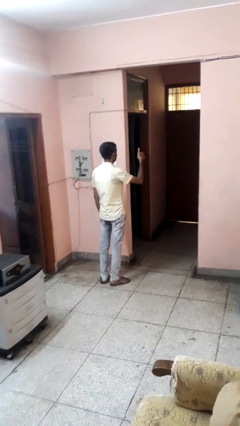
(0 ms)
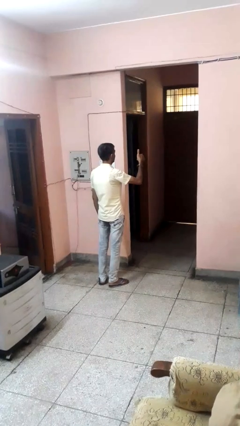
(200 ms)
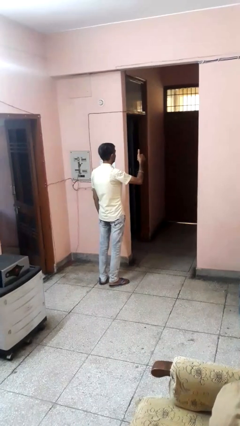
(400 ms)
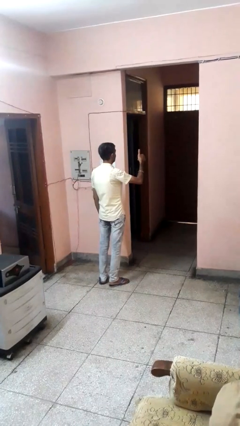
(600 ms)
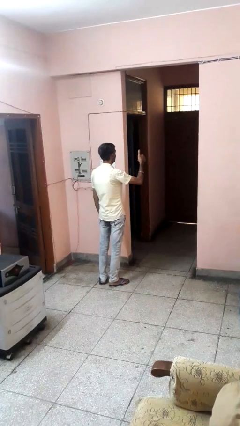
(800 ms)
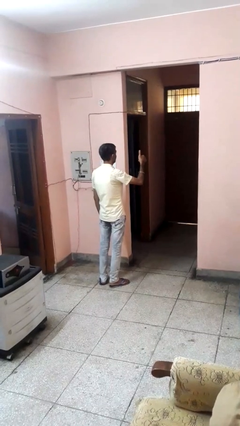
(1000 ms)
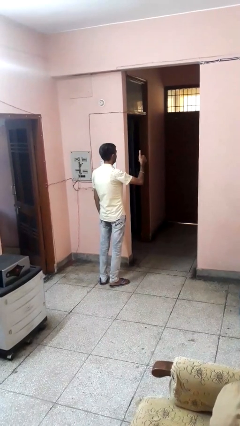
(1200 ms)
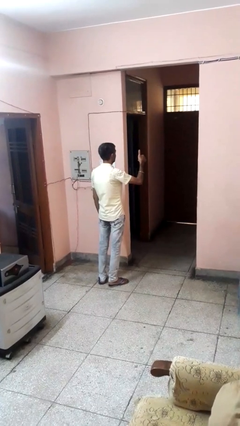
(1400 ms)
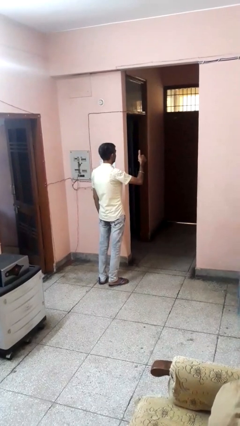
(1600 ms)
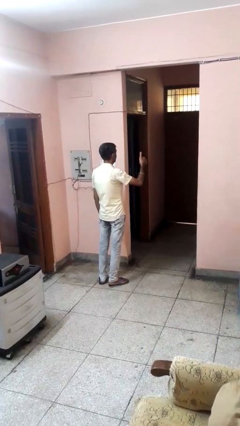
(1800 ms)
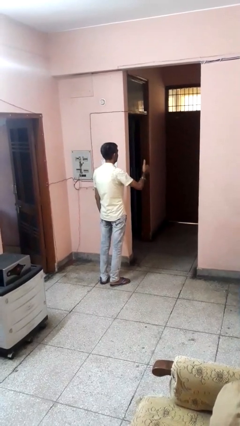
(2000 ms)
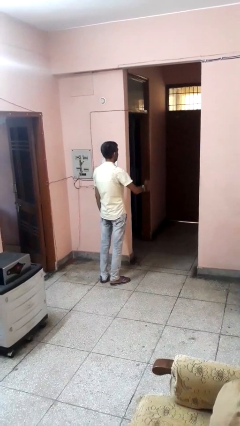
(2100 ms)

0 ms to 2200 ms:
person gestures thumbs up

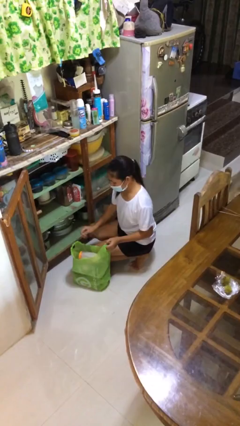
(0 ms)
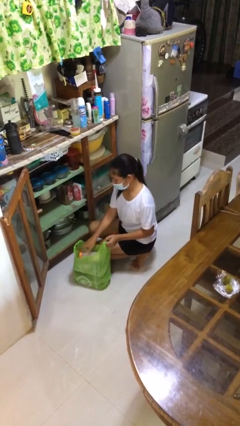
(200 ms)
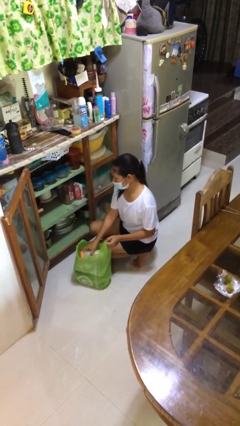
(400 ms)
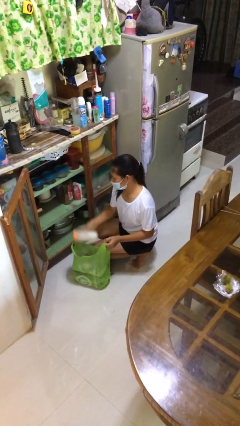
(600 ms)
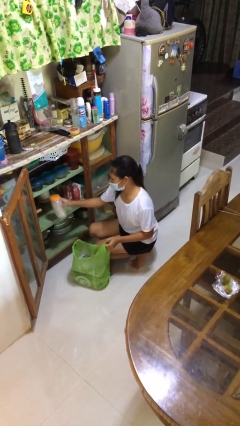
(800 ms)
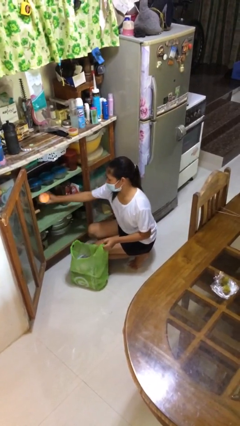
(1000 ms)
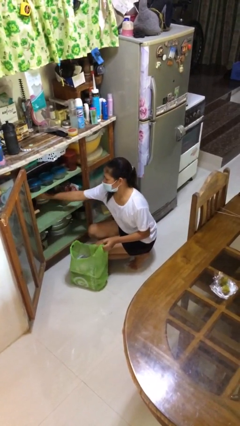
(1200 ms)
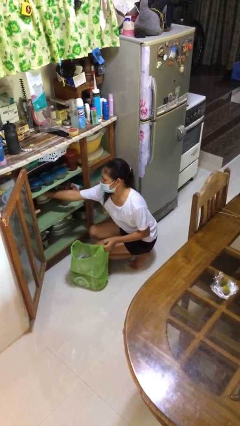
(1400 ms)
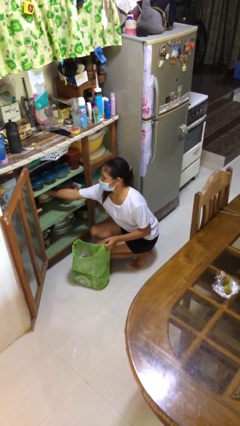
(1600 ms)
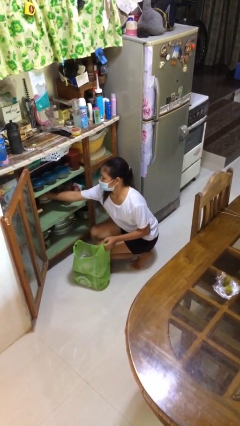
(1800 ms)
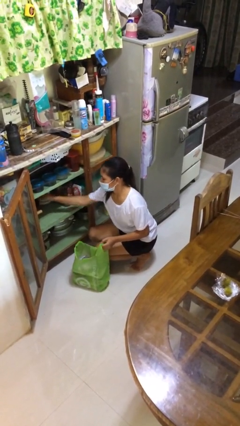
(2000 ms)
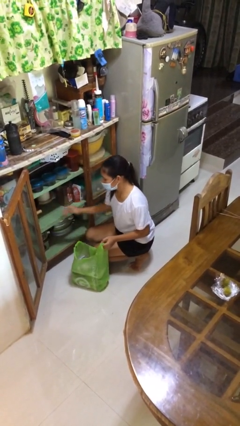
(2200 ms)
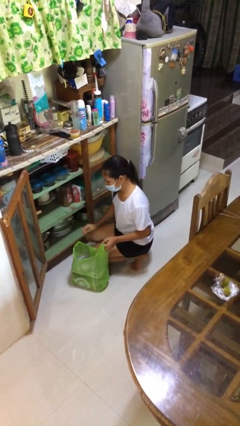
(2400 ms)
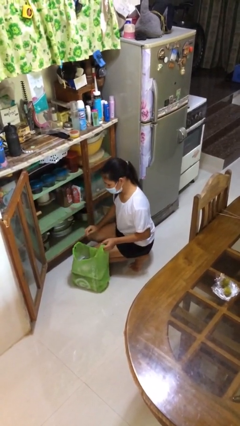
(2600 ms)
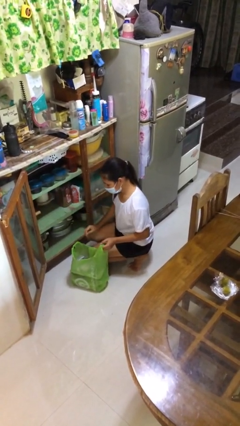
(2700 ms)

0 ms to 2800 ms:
person loads groceries into cabinet

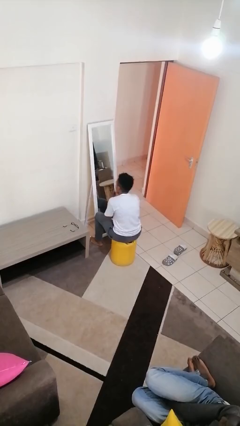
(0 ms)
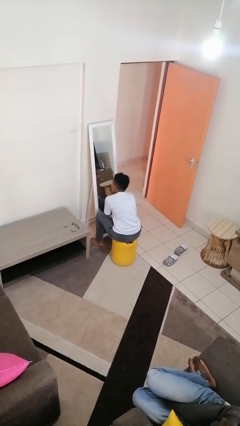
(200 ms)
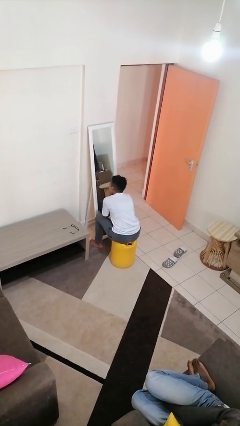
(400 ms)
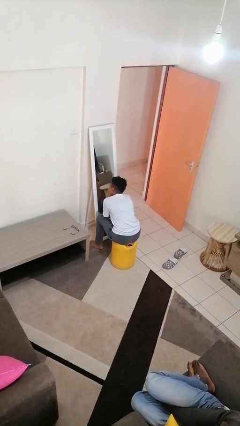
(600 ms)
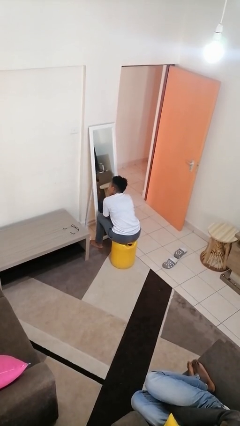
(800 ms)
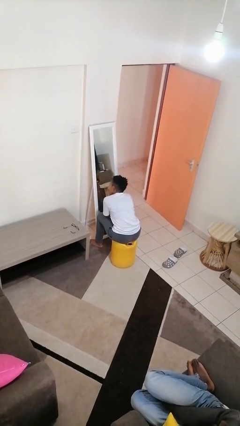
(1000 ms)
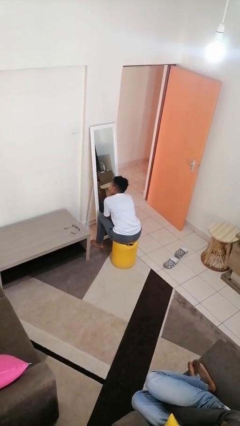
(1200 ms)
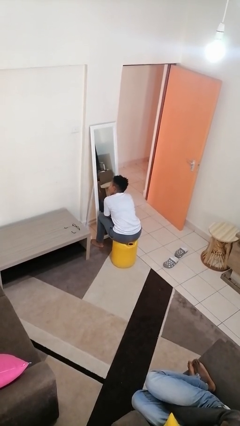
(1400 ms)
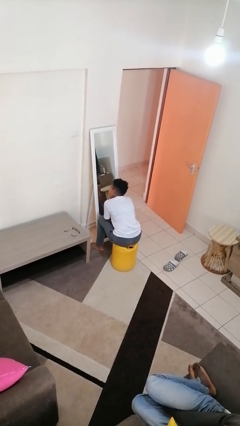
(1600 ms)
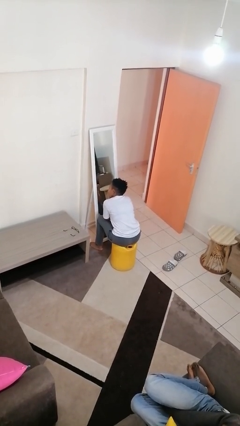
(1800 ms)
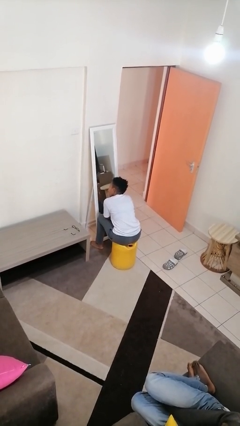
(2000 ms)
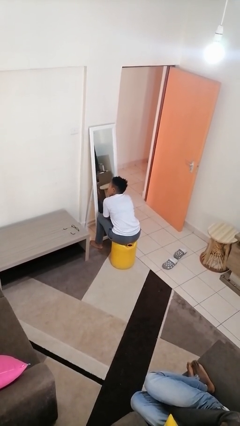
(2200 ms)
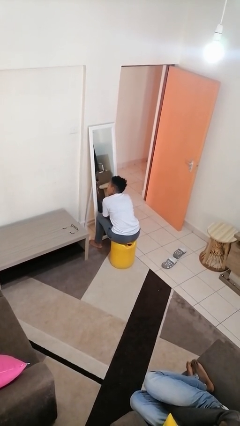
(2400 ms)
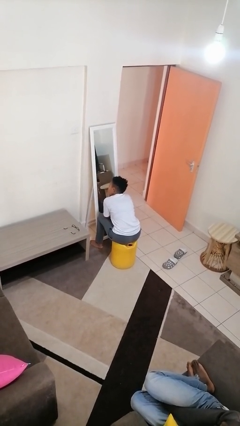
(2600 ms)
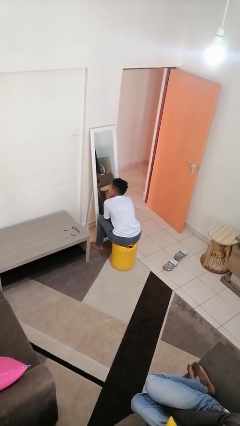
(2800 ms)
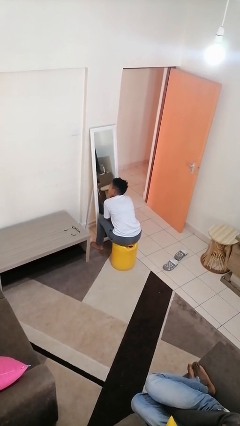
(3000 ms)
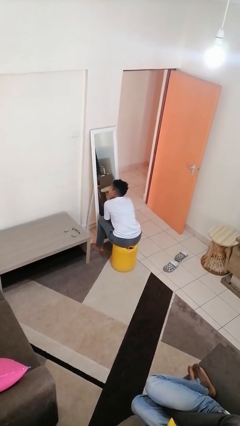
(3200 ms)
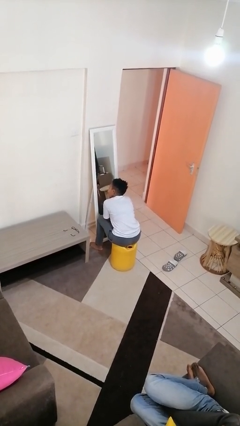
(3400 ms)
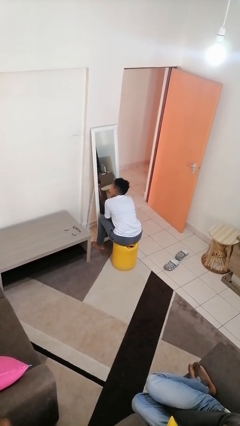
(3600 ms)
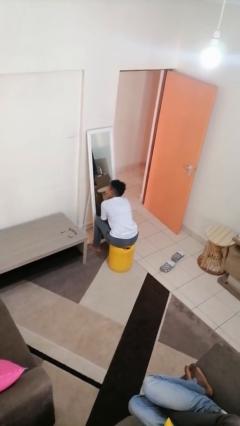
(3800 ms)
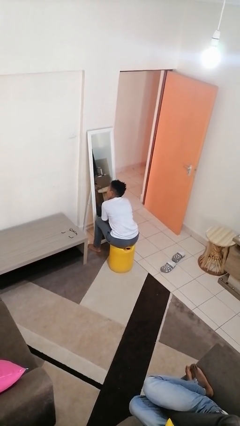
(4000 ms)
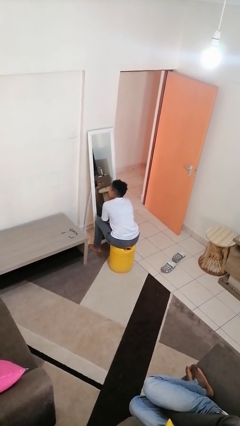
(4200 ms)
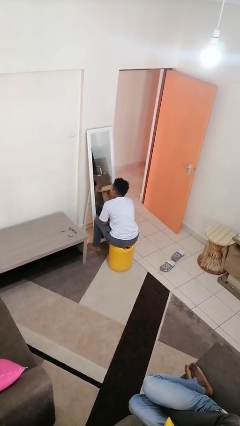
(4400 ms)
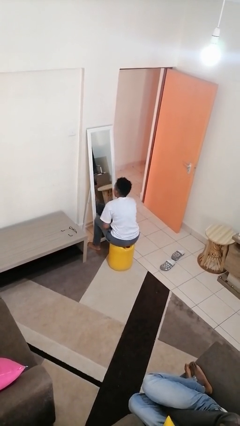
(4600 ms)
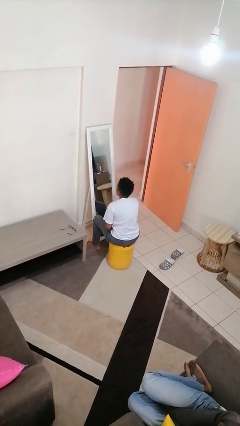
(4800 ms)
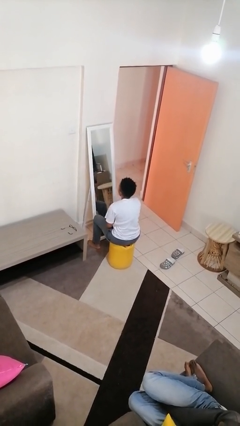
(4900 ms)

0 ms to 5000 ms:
person applies eye makeup

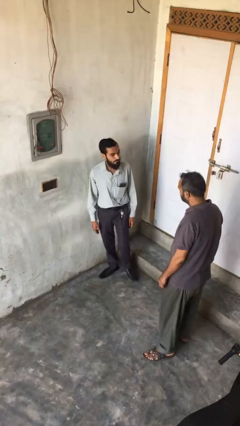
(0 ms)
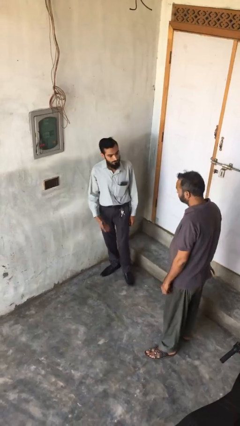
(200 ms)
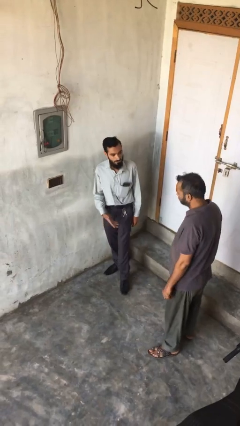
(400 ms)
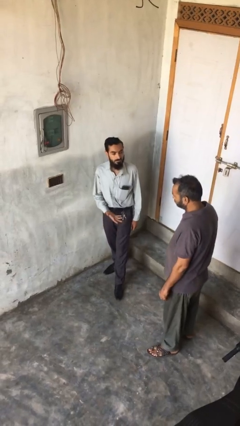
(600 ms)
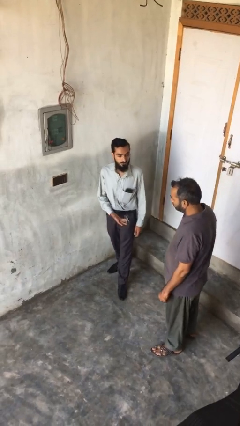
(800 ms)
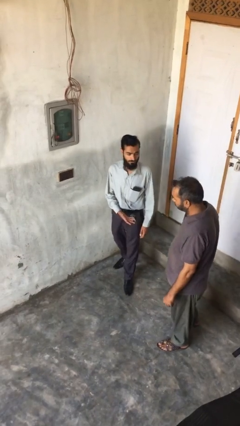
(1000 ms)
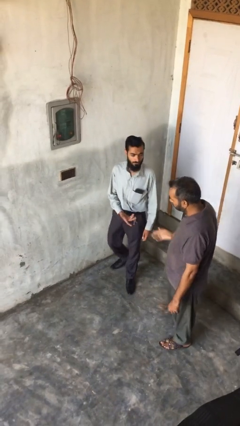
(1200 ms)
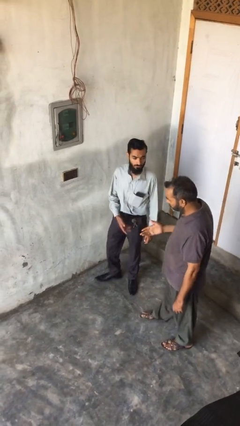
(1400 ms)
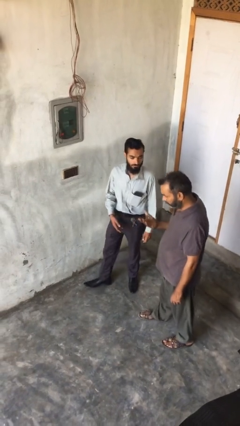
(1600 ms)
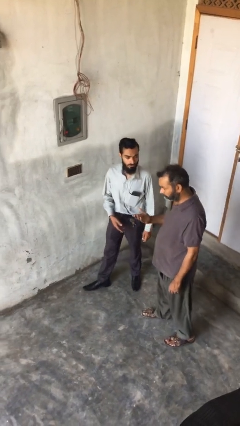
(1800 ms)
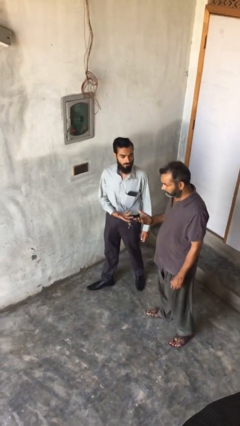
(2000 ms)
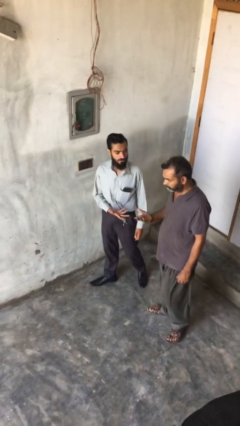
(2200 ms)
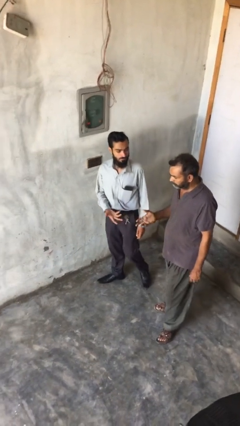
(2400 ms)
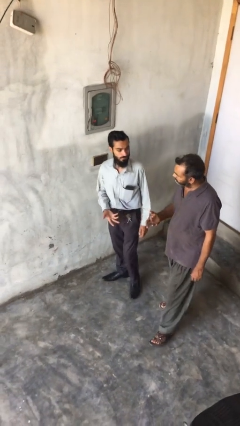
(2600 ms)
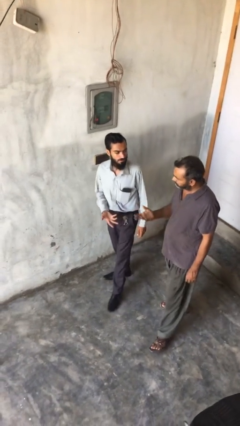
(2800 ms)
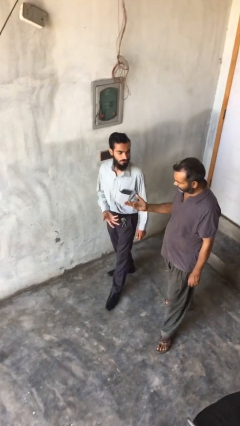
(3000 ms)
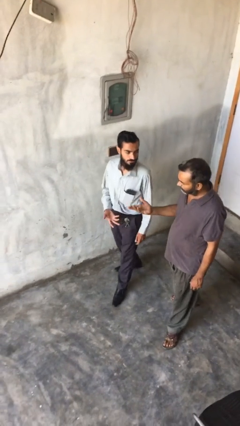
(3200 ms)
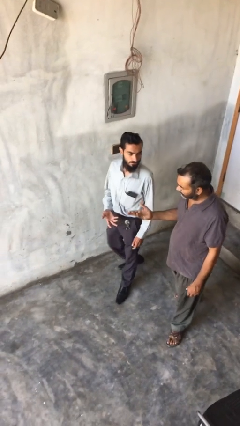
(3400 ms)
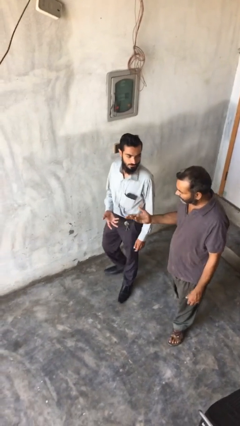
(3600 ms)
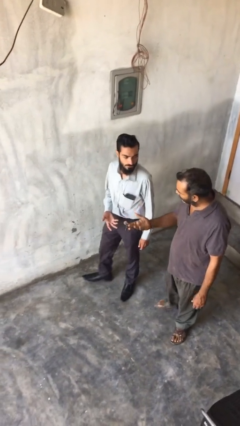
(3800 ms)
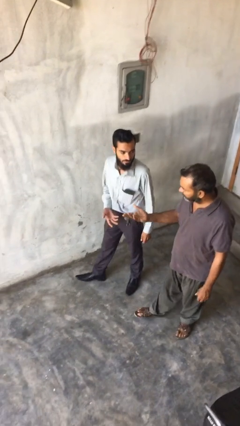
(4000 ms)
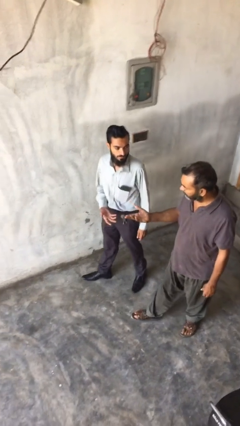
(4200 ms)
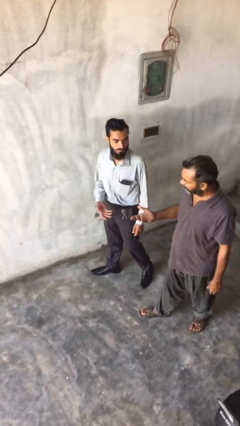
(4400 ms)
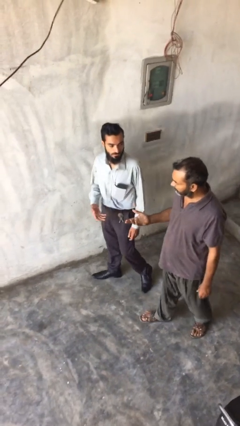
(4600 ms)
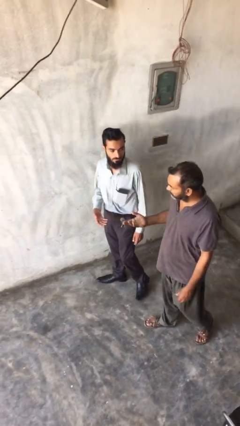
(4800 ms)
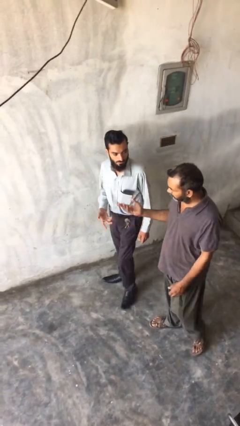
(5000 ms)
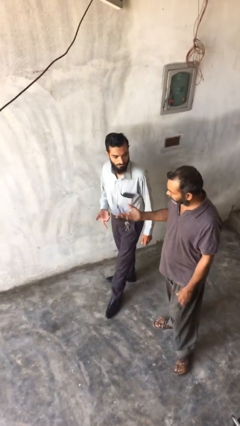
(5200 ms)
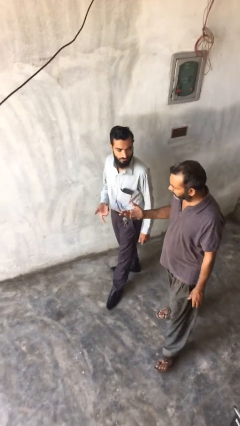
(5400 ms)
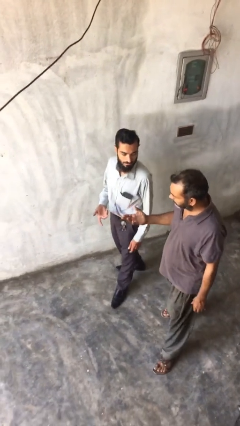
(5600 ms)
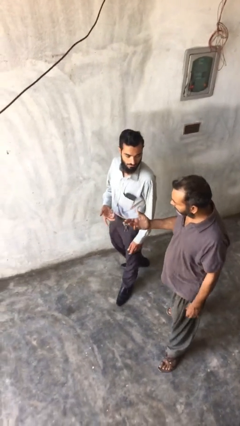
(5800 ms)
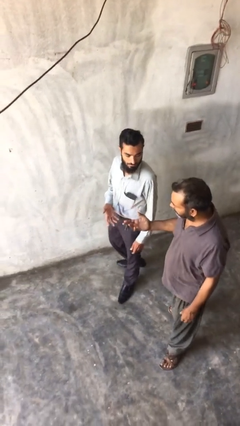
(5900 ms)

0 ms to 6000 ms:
person talks to person

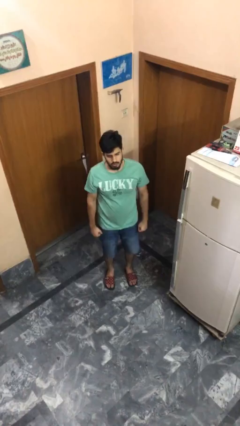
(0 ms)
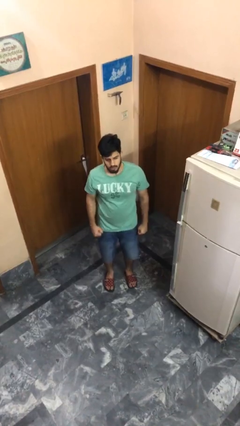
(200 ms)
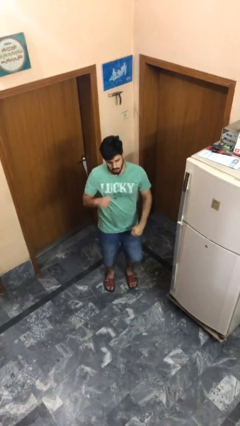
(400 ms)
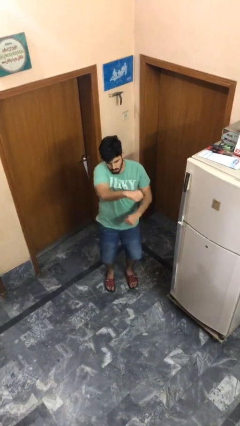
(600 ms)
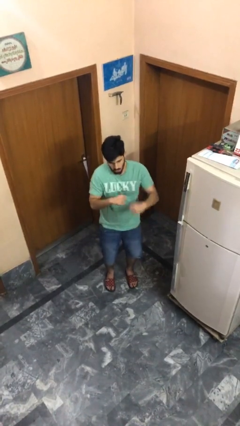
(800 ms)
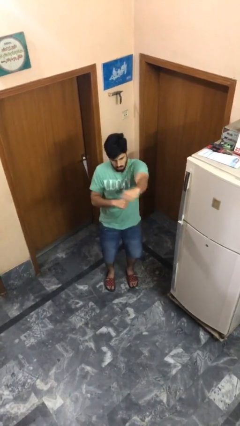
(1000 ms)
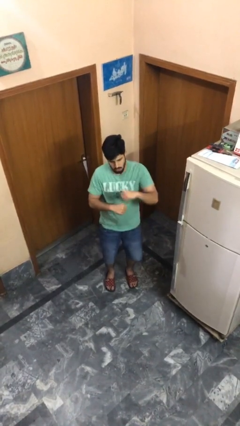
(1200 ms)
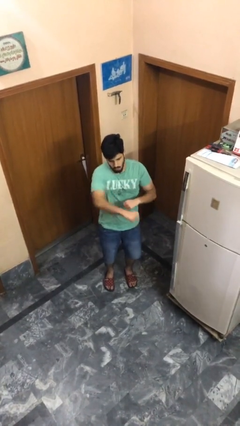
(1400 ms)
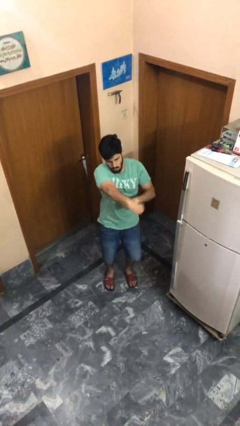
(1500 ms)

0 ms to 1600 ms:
person punches

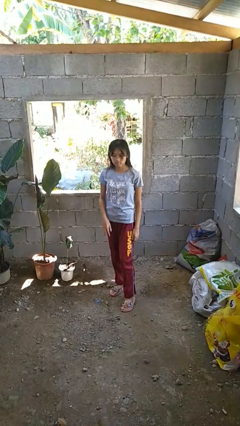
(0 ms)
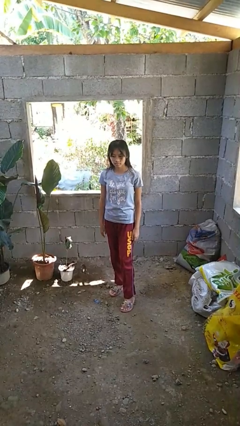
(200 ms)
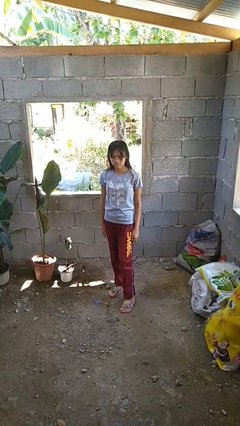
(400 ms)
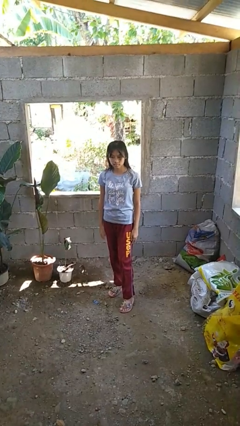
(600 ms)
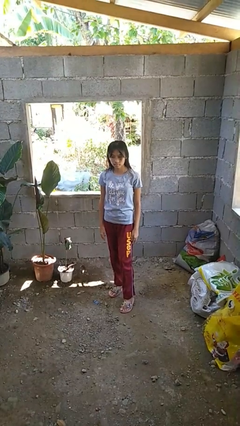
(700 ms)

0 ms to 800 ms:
person gestures lower hand
